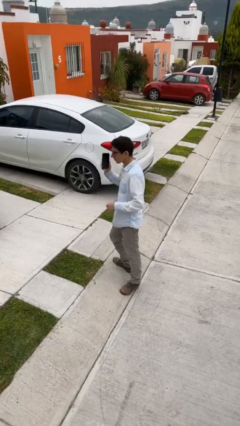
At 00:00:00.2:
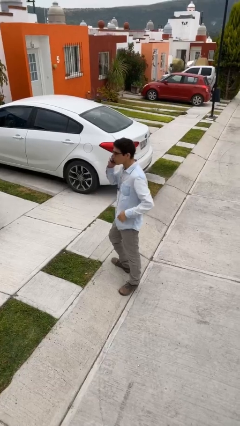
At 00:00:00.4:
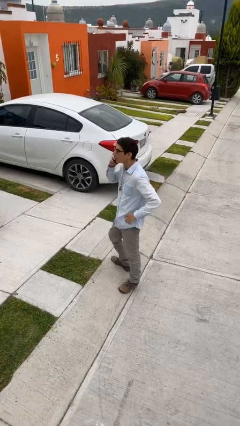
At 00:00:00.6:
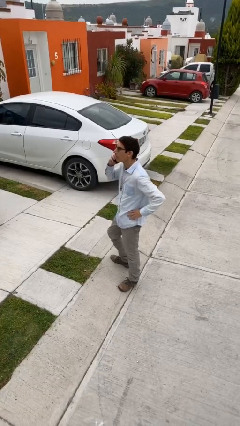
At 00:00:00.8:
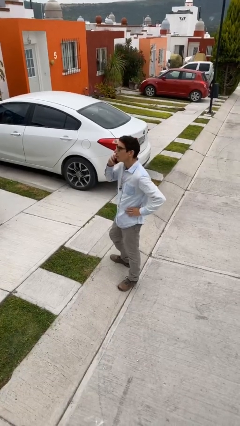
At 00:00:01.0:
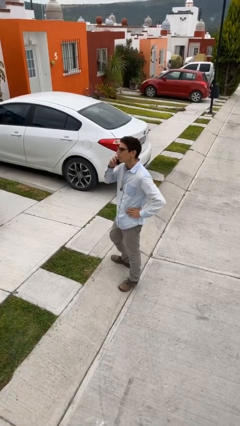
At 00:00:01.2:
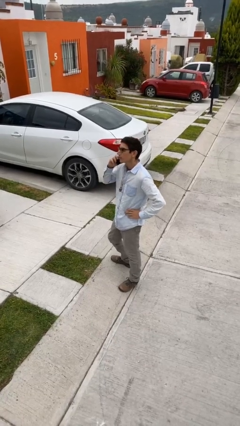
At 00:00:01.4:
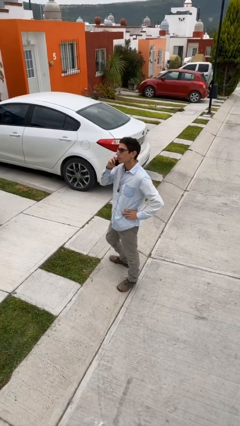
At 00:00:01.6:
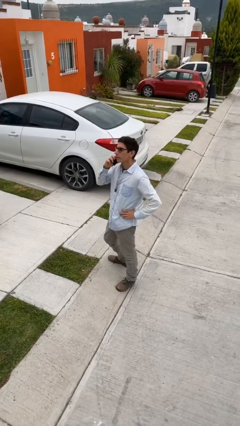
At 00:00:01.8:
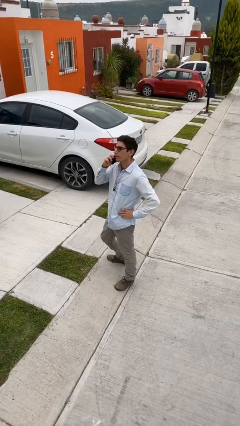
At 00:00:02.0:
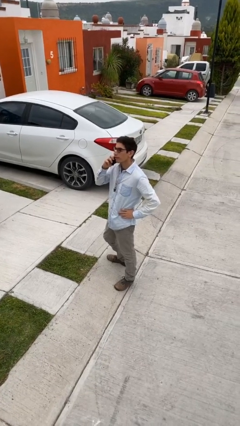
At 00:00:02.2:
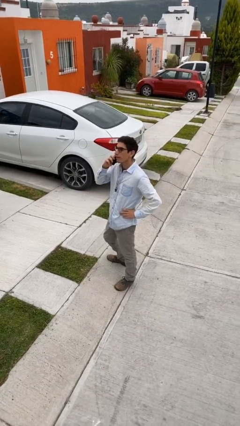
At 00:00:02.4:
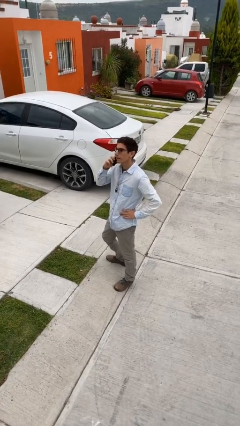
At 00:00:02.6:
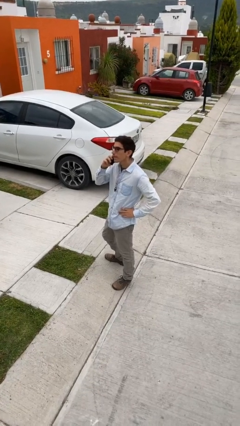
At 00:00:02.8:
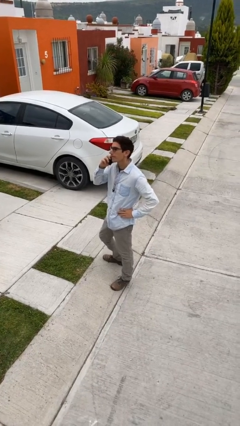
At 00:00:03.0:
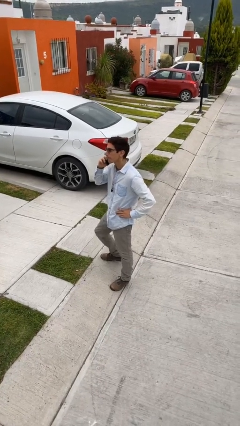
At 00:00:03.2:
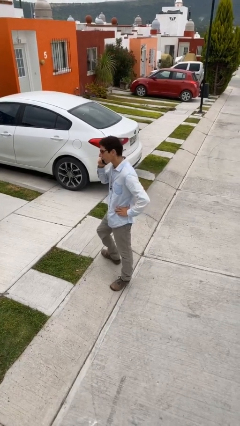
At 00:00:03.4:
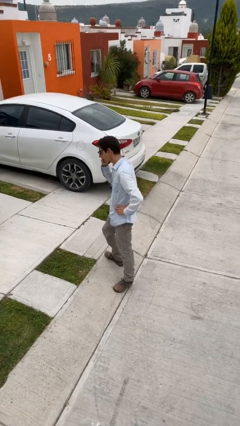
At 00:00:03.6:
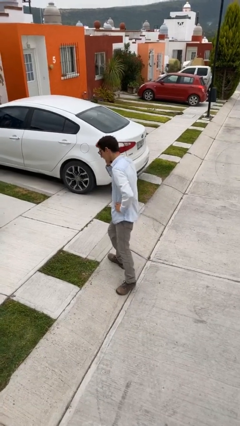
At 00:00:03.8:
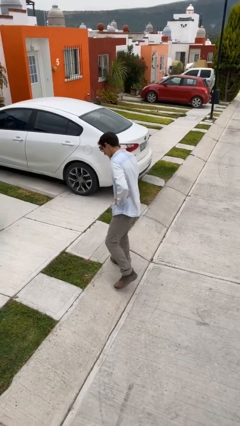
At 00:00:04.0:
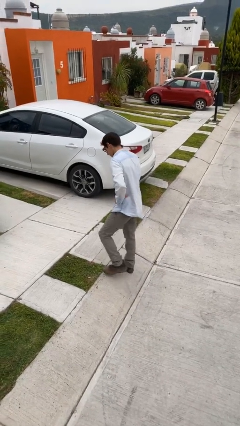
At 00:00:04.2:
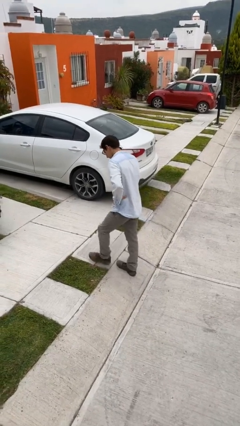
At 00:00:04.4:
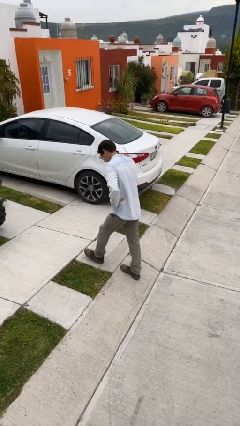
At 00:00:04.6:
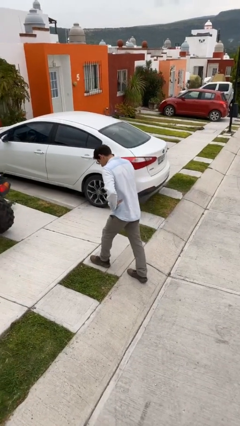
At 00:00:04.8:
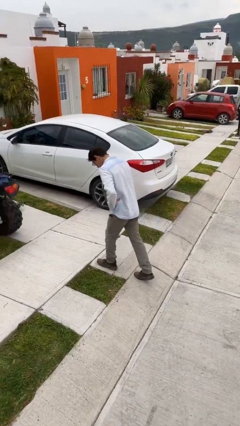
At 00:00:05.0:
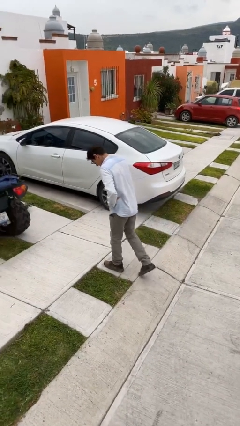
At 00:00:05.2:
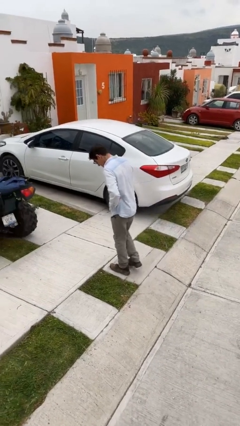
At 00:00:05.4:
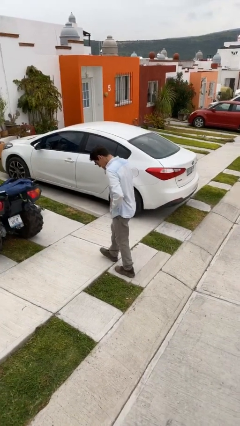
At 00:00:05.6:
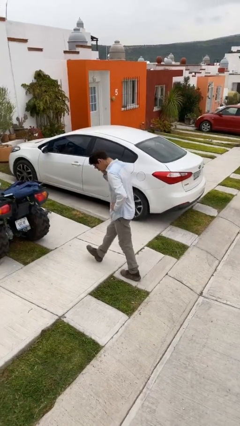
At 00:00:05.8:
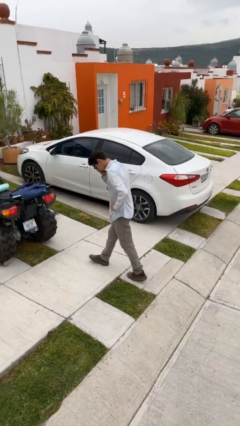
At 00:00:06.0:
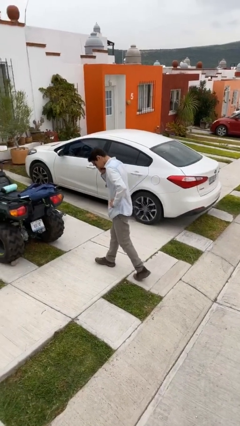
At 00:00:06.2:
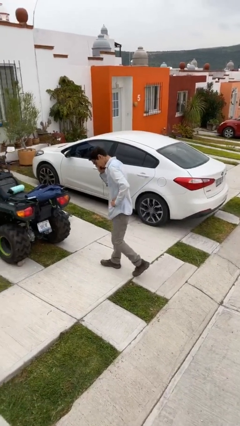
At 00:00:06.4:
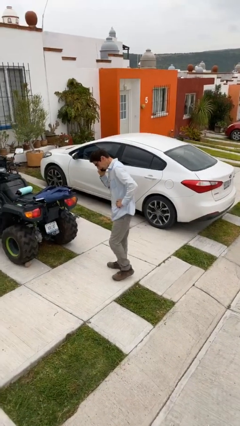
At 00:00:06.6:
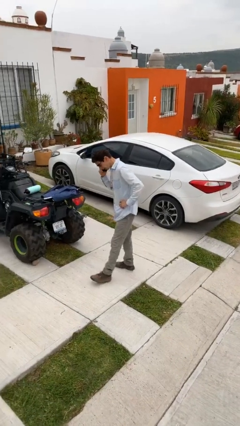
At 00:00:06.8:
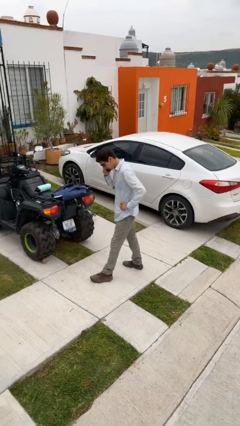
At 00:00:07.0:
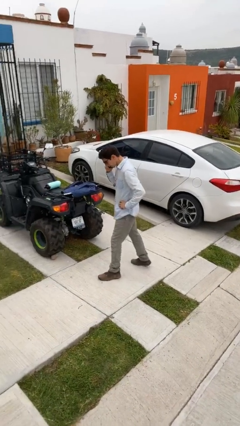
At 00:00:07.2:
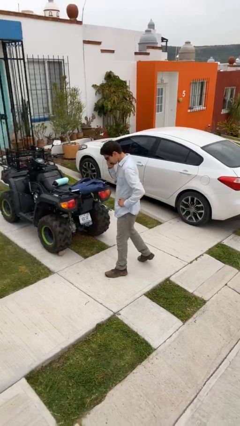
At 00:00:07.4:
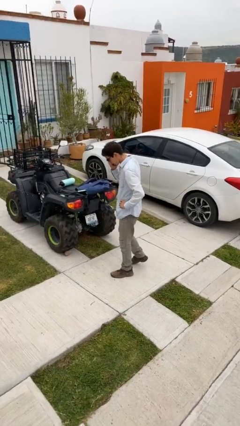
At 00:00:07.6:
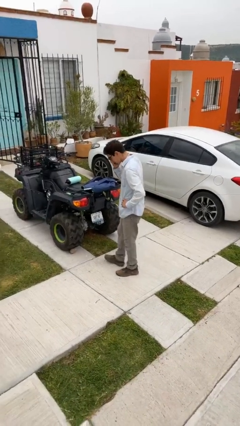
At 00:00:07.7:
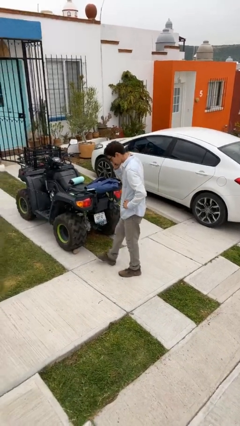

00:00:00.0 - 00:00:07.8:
person talks on phone

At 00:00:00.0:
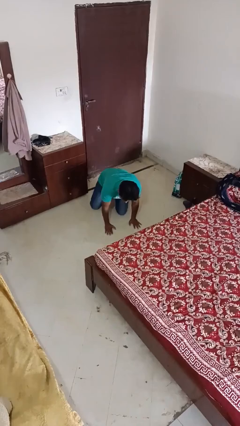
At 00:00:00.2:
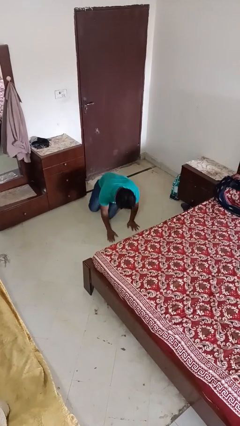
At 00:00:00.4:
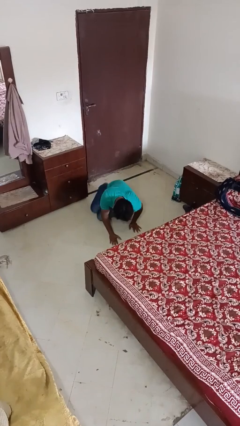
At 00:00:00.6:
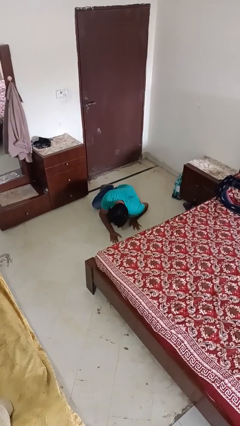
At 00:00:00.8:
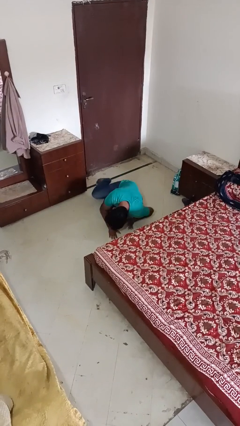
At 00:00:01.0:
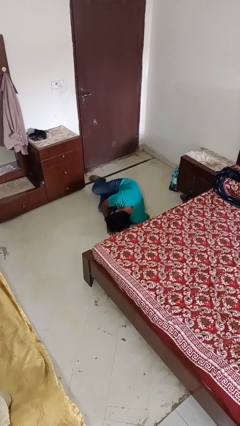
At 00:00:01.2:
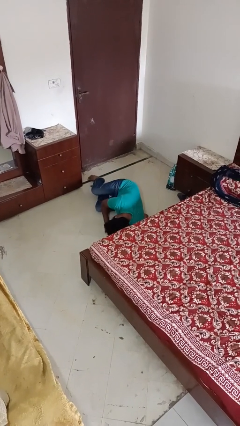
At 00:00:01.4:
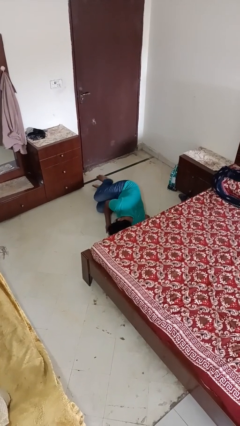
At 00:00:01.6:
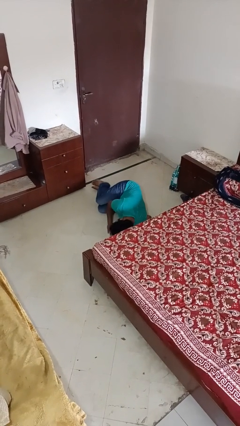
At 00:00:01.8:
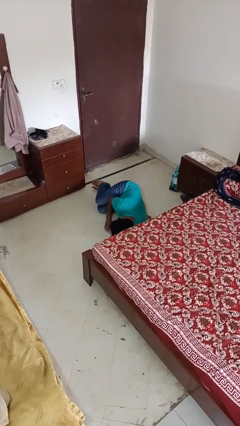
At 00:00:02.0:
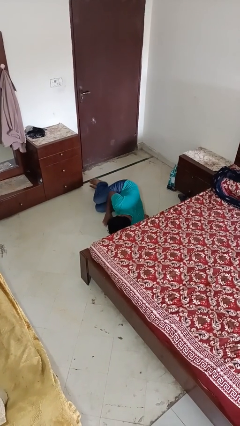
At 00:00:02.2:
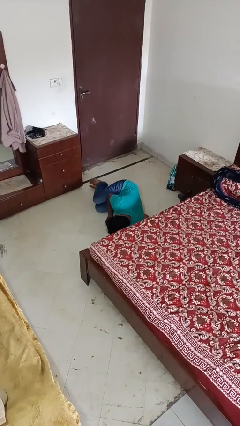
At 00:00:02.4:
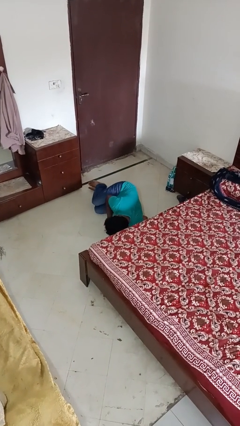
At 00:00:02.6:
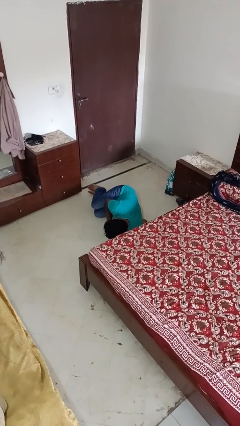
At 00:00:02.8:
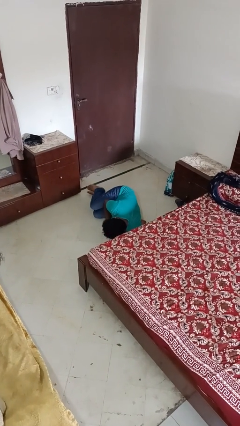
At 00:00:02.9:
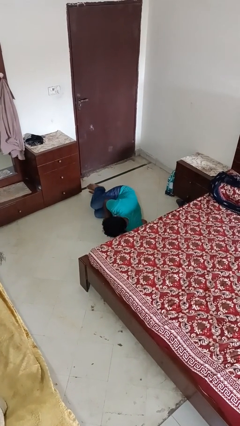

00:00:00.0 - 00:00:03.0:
person lies down on floor

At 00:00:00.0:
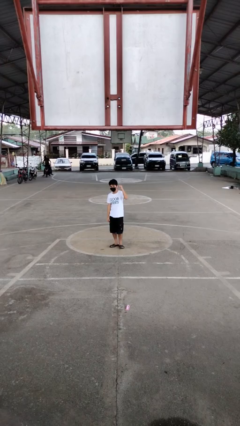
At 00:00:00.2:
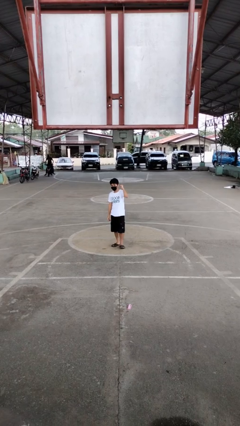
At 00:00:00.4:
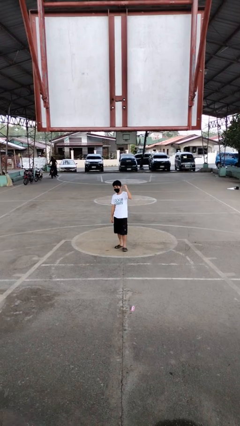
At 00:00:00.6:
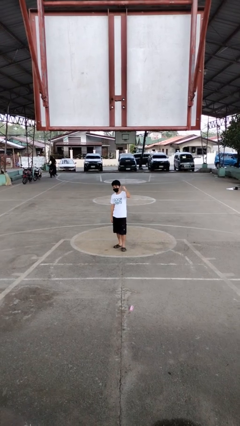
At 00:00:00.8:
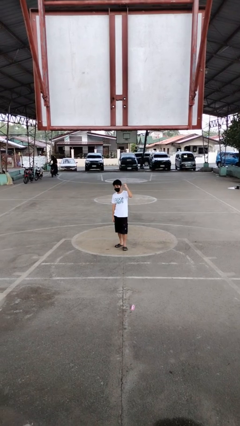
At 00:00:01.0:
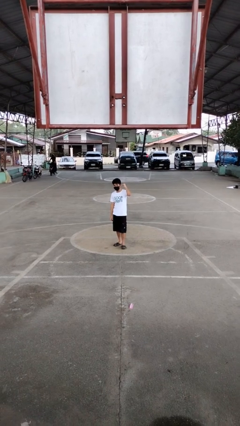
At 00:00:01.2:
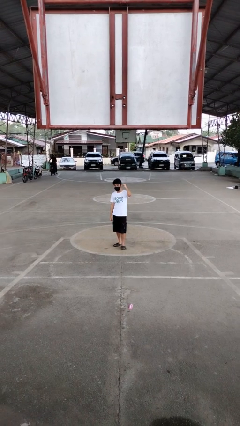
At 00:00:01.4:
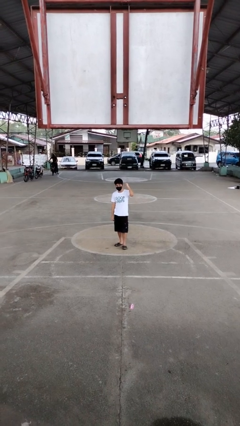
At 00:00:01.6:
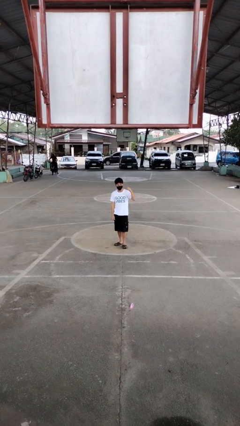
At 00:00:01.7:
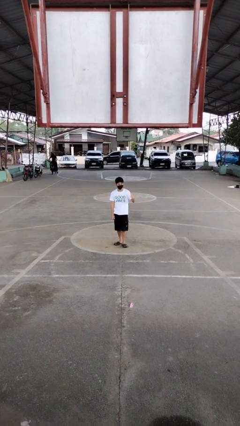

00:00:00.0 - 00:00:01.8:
person gestures behind me

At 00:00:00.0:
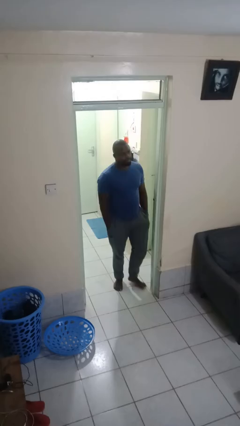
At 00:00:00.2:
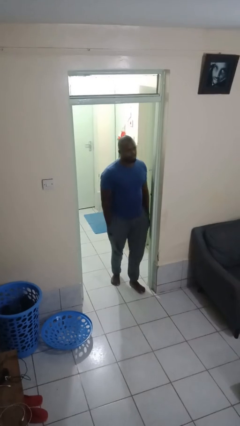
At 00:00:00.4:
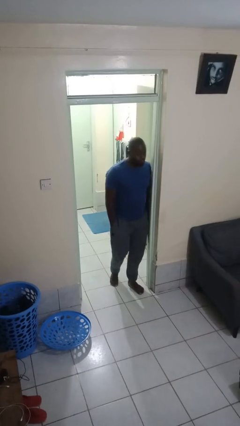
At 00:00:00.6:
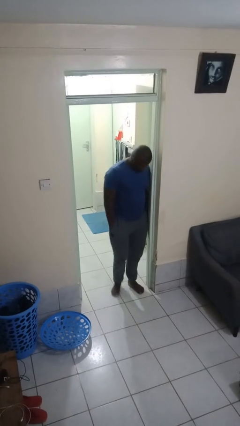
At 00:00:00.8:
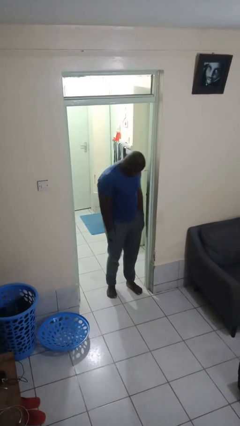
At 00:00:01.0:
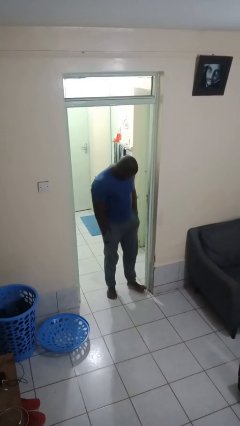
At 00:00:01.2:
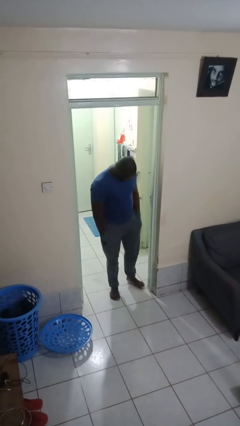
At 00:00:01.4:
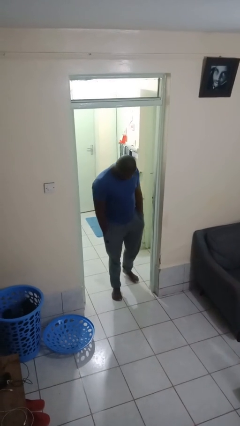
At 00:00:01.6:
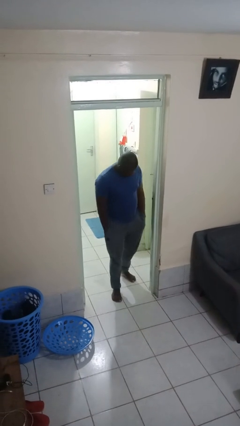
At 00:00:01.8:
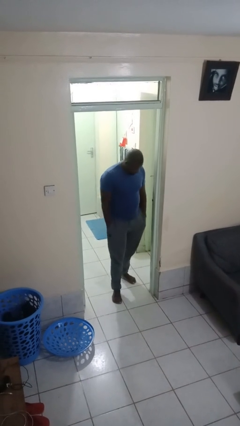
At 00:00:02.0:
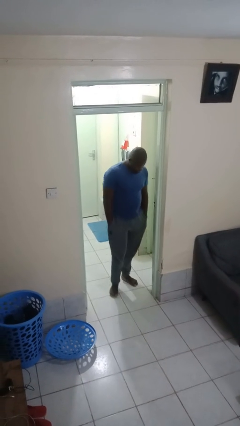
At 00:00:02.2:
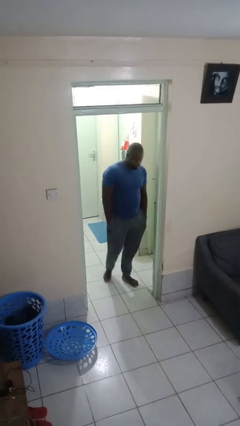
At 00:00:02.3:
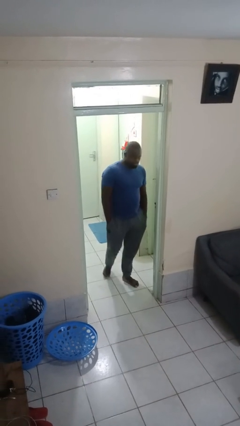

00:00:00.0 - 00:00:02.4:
person bumps into wall

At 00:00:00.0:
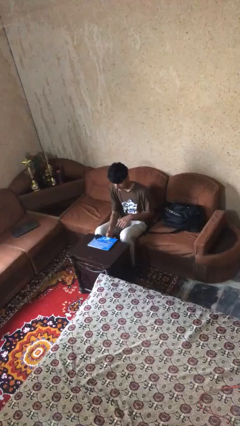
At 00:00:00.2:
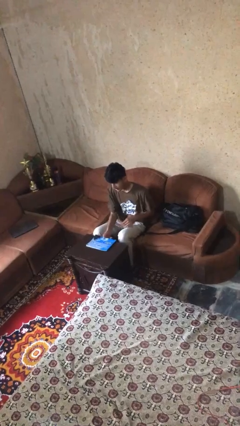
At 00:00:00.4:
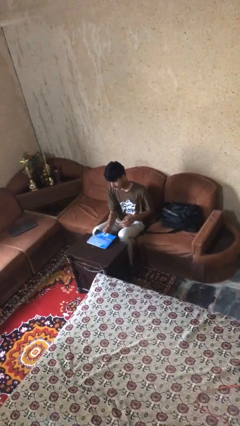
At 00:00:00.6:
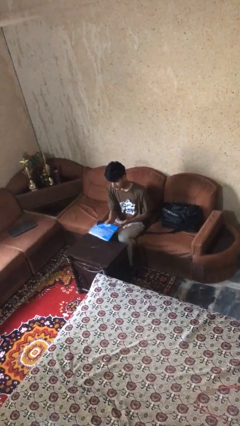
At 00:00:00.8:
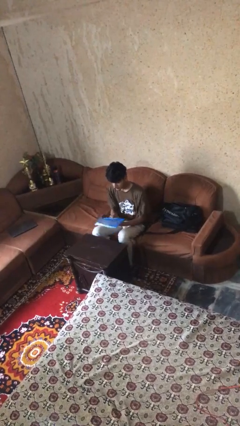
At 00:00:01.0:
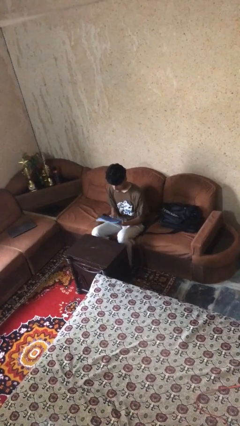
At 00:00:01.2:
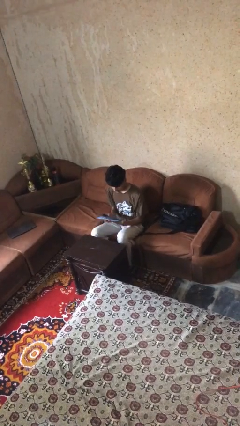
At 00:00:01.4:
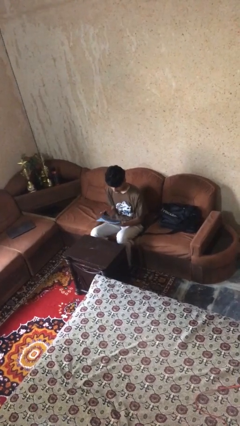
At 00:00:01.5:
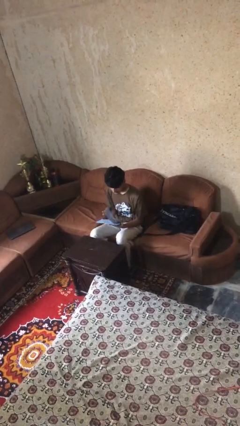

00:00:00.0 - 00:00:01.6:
person picks up object from table

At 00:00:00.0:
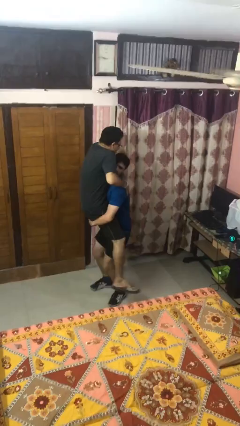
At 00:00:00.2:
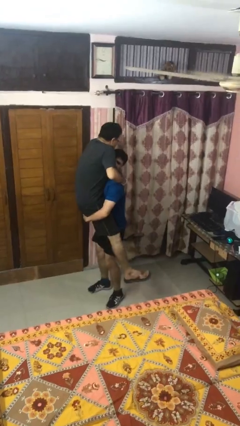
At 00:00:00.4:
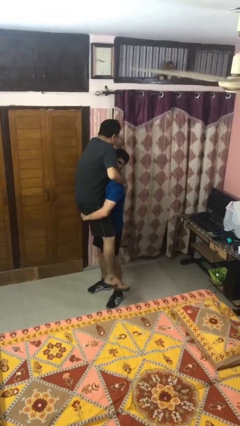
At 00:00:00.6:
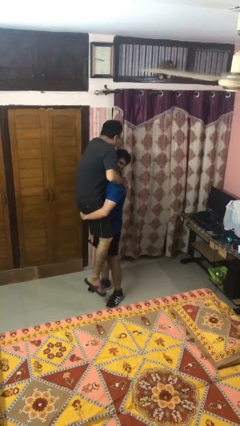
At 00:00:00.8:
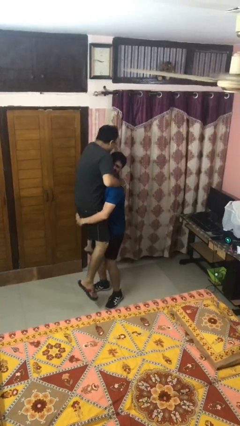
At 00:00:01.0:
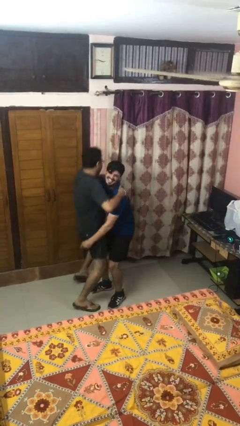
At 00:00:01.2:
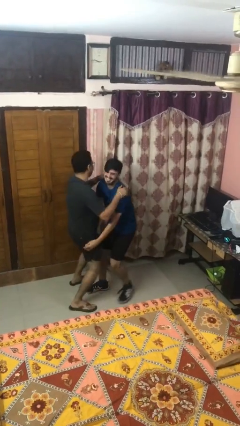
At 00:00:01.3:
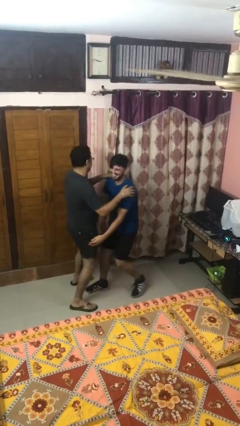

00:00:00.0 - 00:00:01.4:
person puts down person
